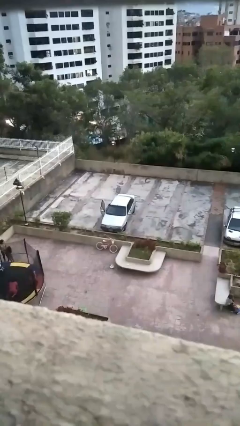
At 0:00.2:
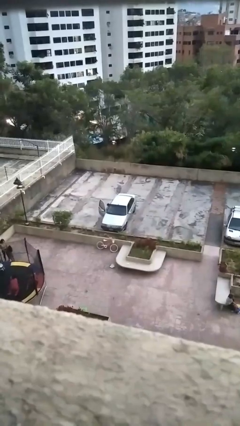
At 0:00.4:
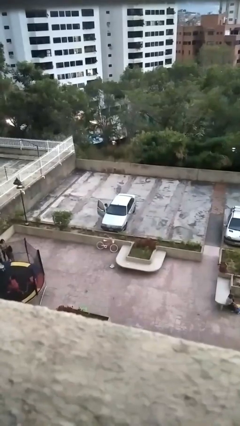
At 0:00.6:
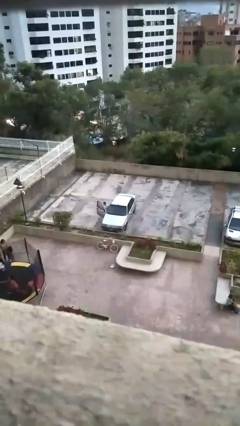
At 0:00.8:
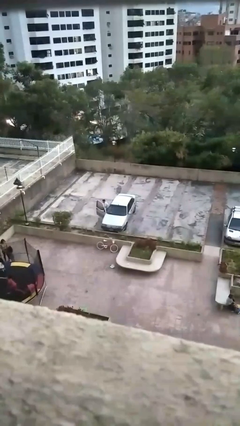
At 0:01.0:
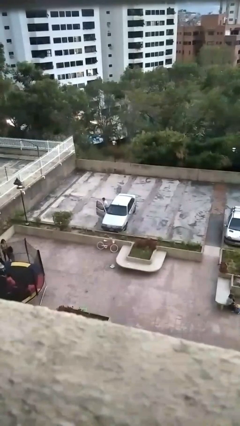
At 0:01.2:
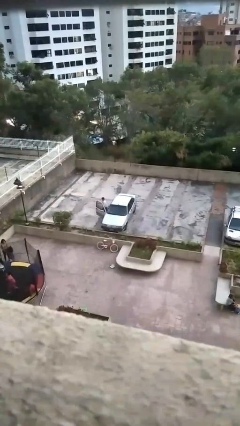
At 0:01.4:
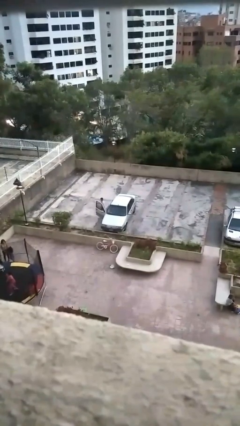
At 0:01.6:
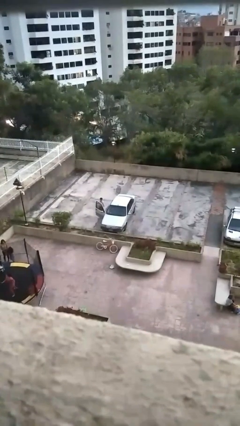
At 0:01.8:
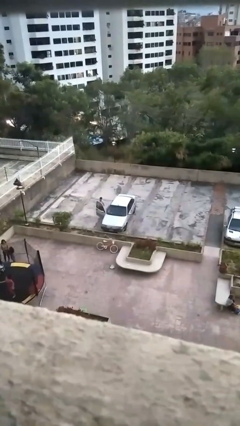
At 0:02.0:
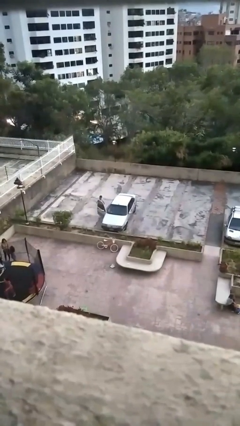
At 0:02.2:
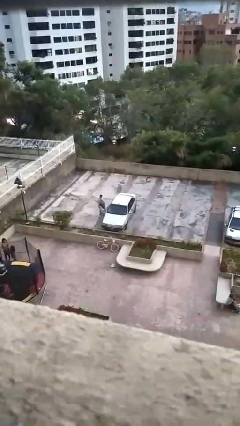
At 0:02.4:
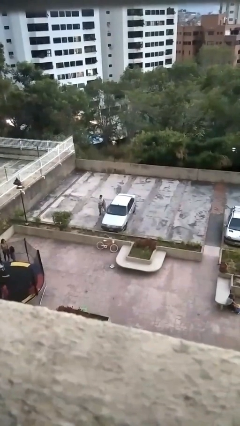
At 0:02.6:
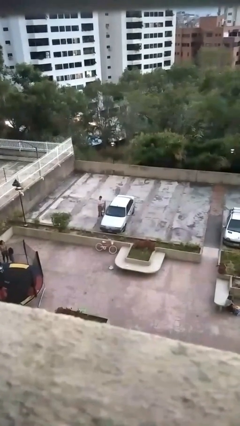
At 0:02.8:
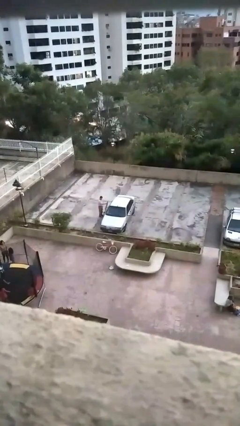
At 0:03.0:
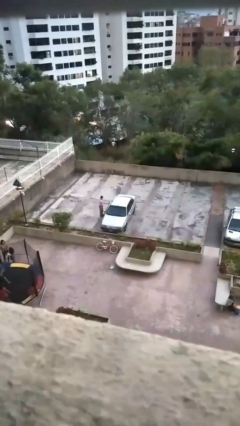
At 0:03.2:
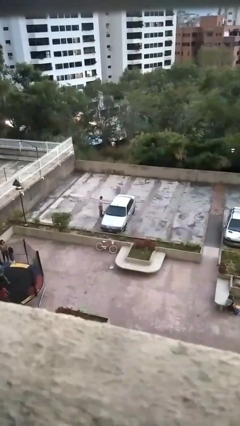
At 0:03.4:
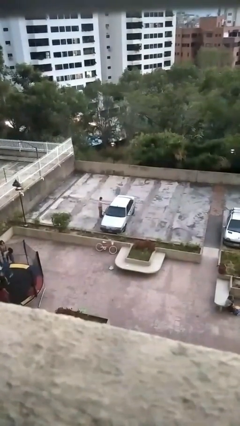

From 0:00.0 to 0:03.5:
car drops off person

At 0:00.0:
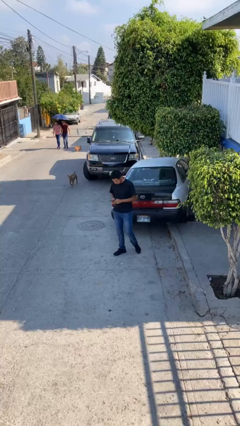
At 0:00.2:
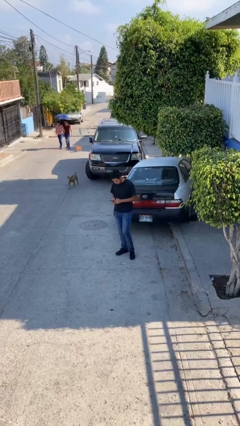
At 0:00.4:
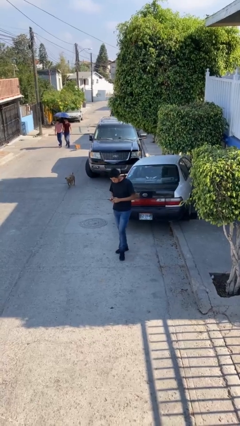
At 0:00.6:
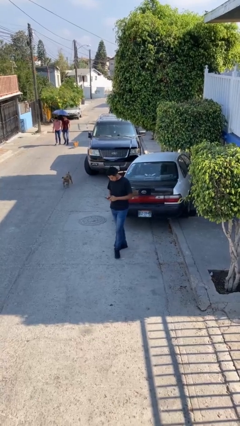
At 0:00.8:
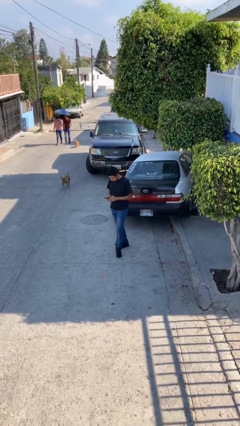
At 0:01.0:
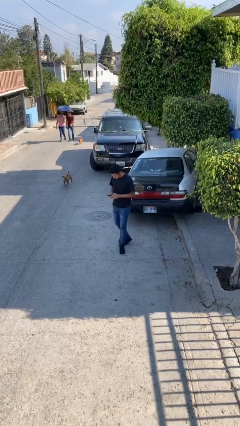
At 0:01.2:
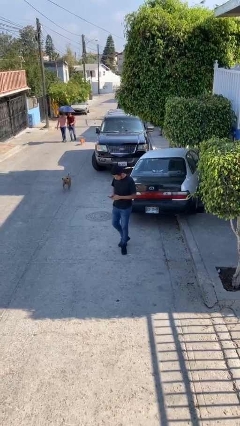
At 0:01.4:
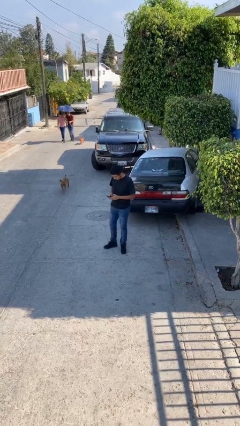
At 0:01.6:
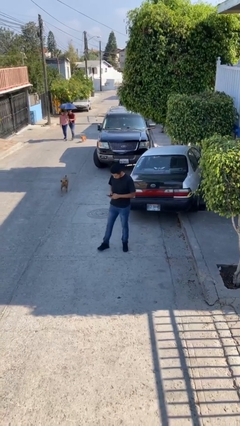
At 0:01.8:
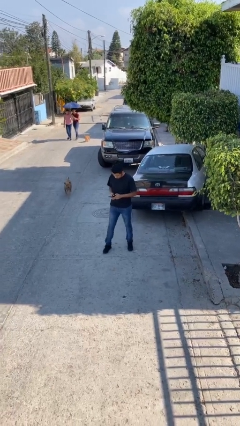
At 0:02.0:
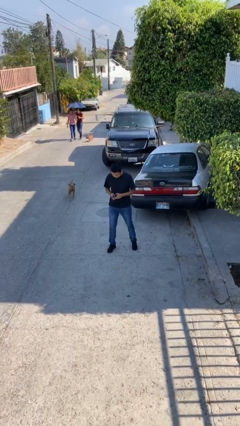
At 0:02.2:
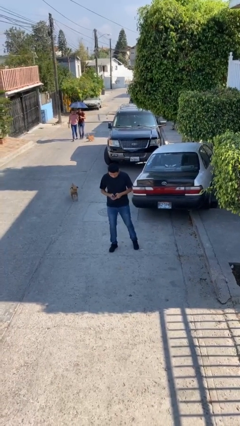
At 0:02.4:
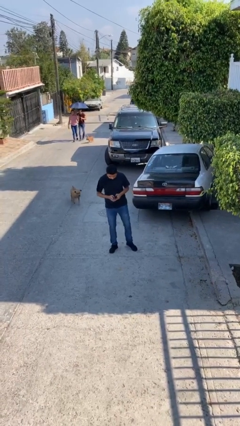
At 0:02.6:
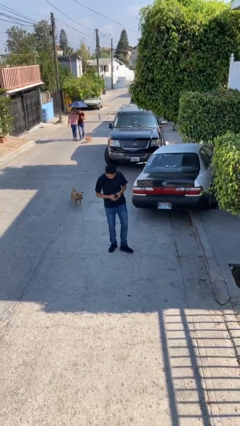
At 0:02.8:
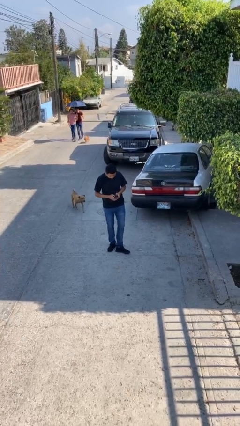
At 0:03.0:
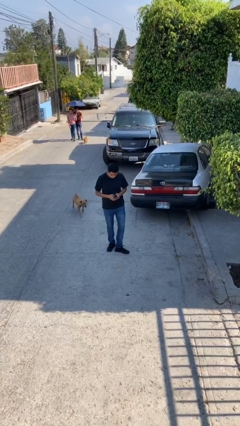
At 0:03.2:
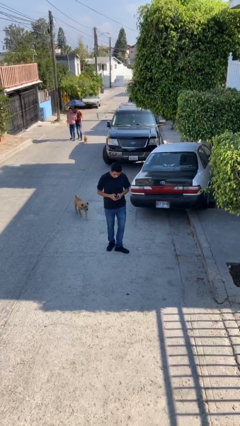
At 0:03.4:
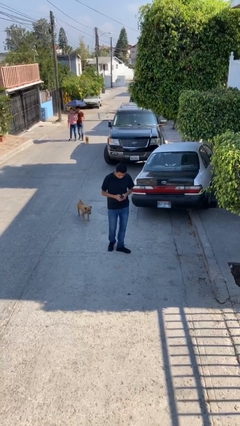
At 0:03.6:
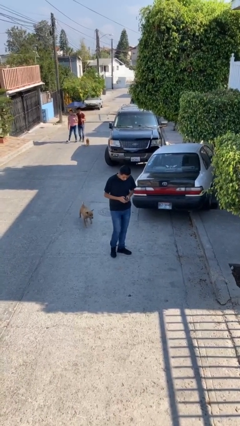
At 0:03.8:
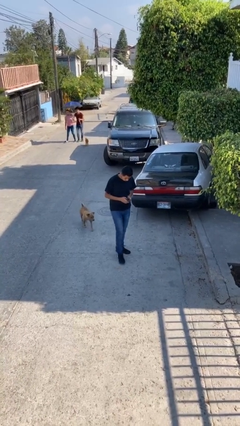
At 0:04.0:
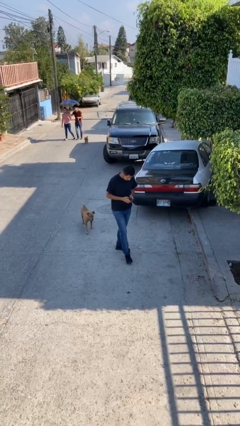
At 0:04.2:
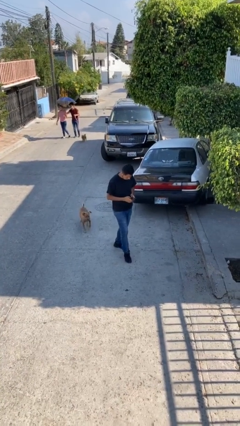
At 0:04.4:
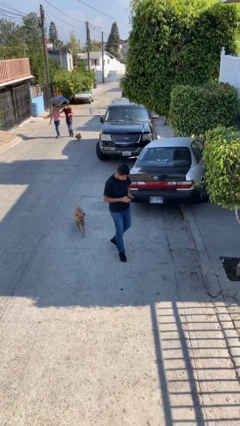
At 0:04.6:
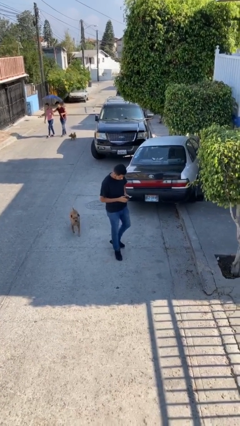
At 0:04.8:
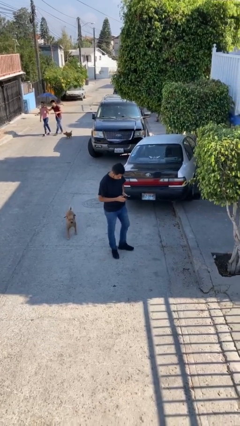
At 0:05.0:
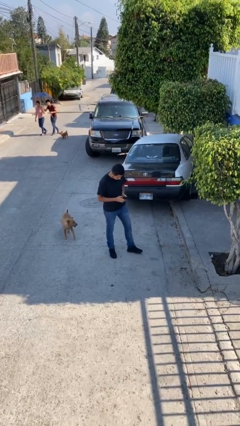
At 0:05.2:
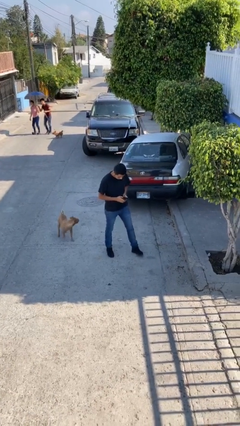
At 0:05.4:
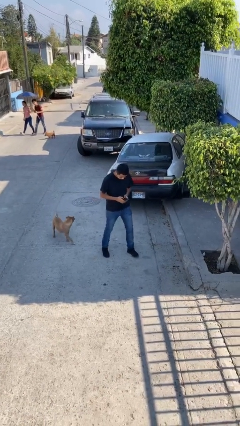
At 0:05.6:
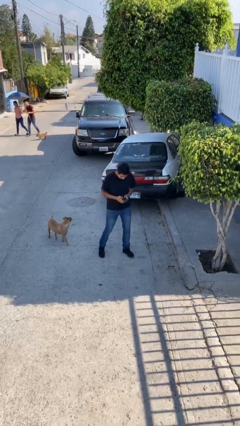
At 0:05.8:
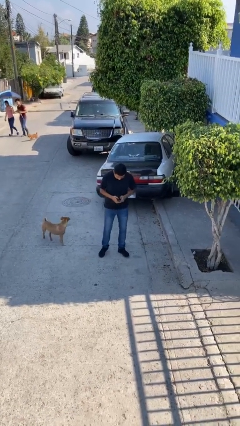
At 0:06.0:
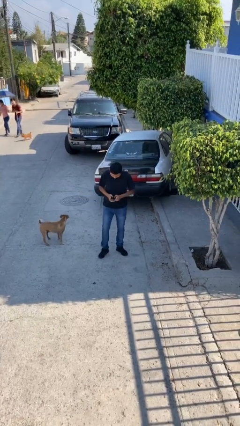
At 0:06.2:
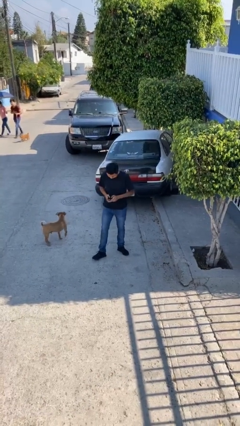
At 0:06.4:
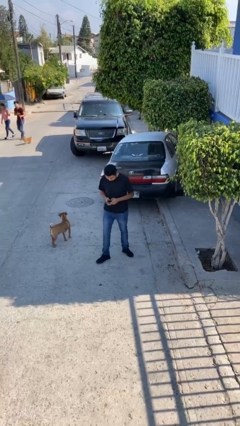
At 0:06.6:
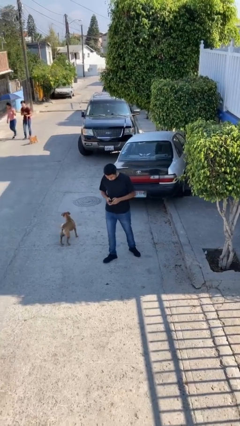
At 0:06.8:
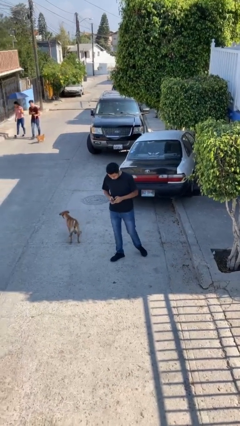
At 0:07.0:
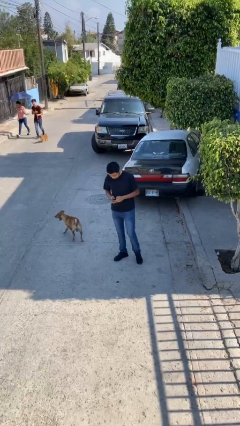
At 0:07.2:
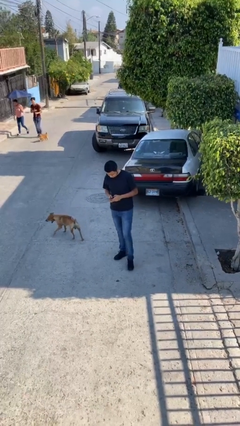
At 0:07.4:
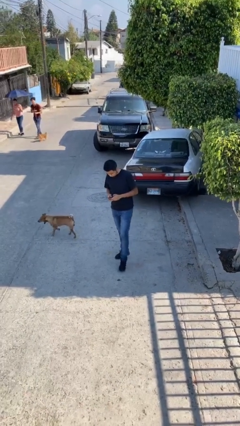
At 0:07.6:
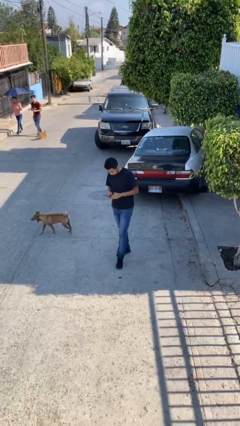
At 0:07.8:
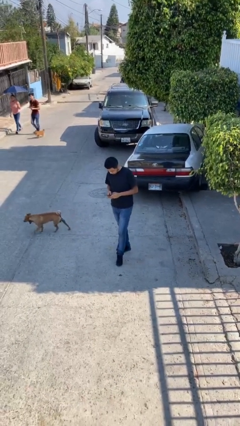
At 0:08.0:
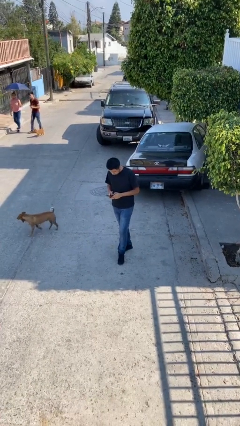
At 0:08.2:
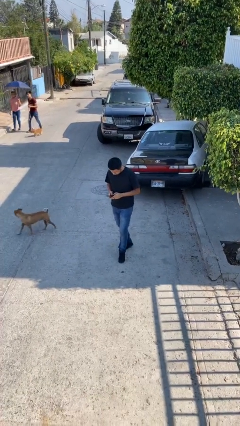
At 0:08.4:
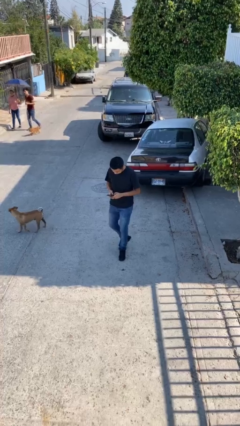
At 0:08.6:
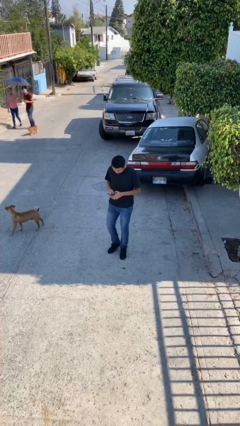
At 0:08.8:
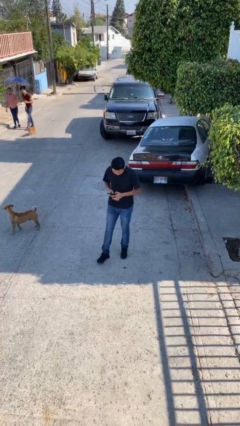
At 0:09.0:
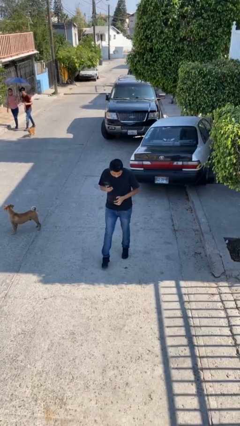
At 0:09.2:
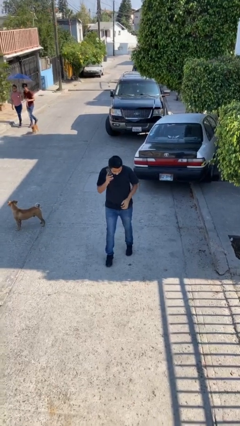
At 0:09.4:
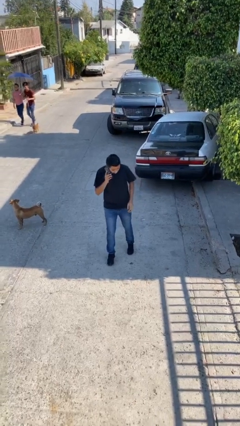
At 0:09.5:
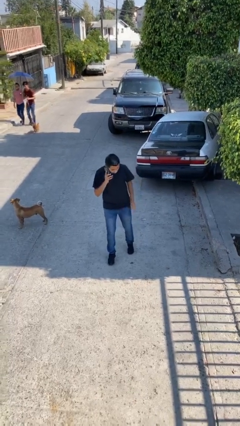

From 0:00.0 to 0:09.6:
person texts on phone

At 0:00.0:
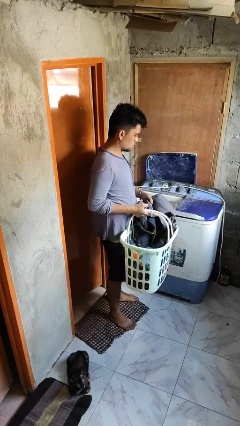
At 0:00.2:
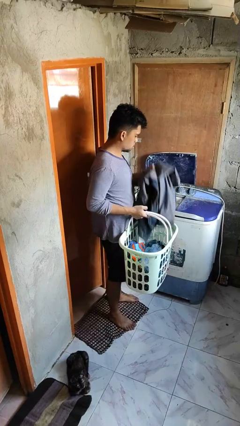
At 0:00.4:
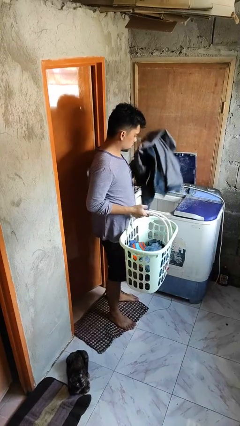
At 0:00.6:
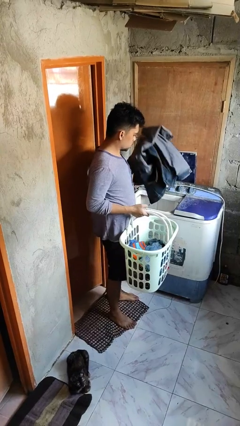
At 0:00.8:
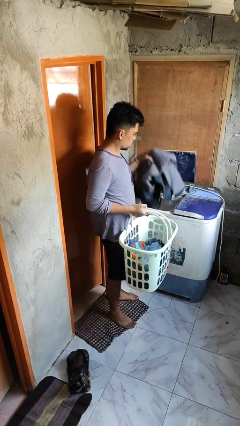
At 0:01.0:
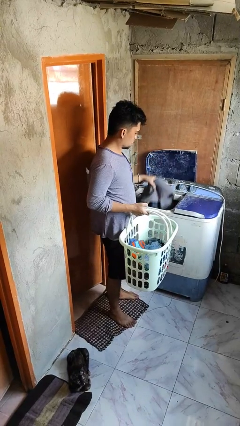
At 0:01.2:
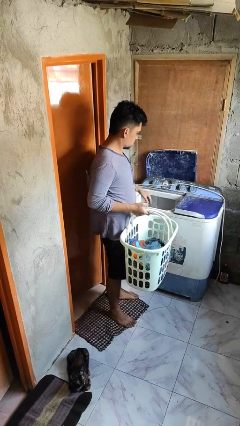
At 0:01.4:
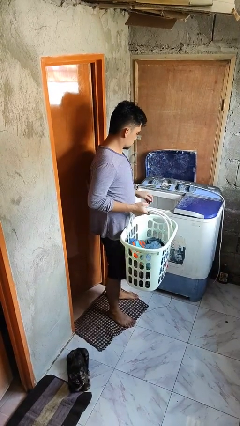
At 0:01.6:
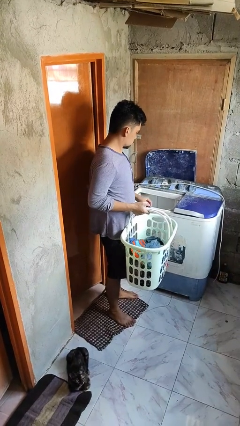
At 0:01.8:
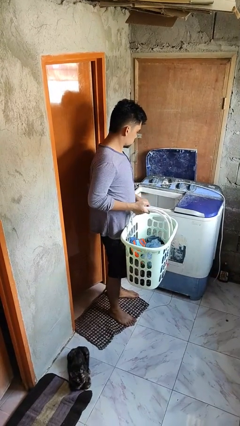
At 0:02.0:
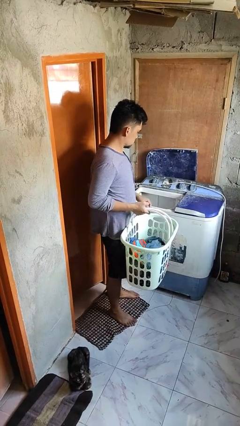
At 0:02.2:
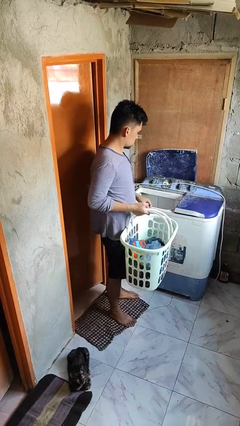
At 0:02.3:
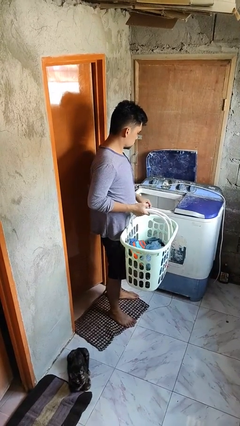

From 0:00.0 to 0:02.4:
person loads clotheswasher

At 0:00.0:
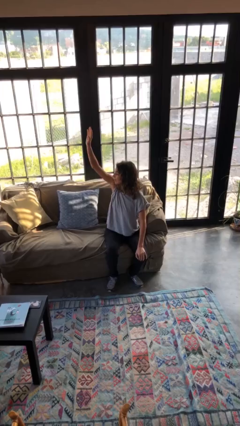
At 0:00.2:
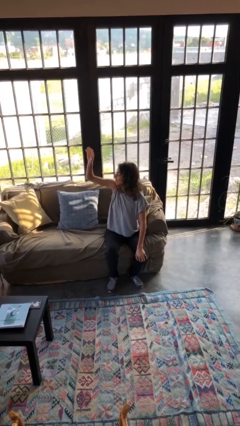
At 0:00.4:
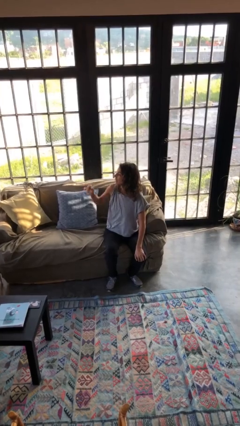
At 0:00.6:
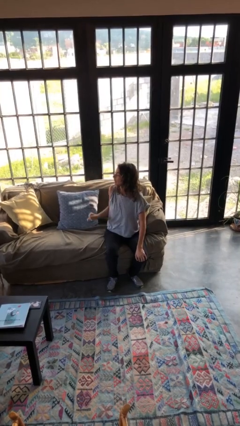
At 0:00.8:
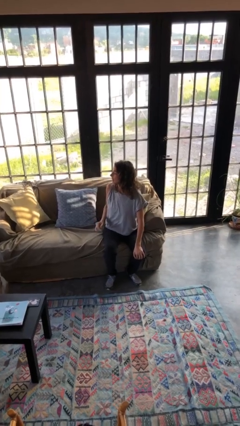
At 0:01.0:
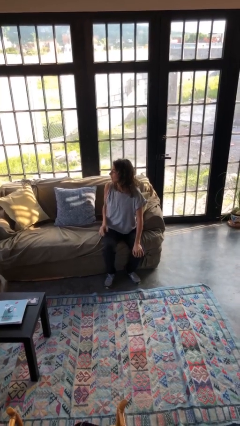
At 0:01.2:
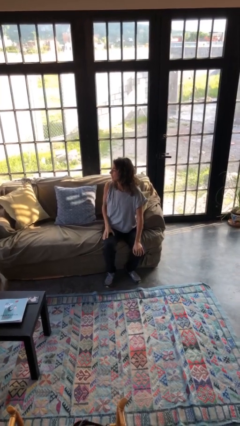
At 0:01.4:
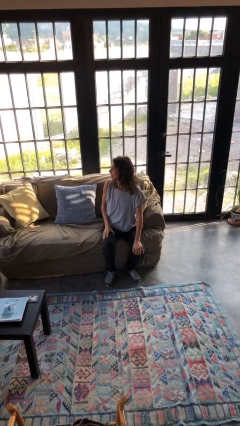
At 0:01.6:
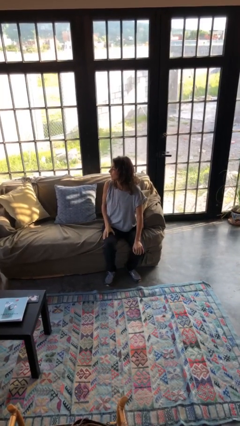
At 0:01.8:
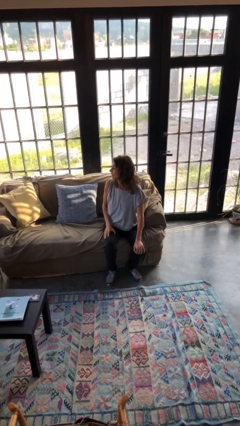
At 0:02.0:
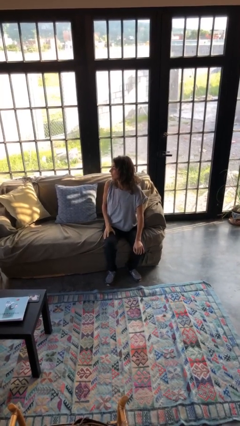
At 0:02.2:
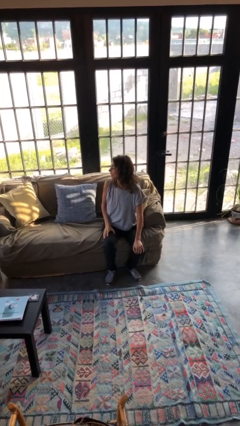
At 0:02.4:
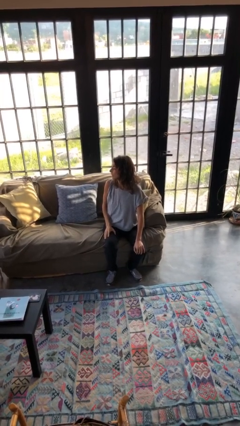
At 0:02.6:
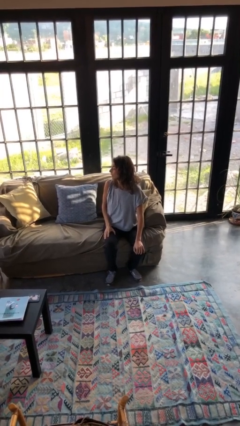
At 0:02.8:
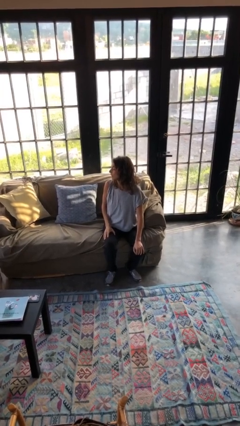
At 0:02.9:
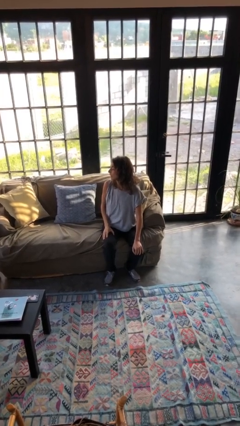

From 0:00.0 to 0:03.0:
person gestures lower hand
